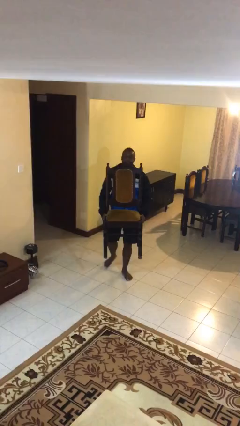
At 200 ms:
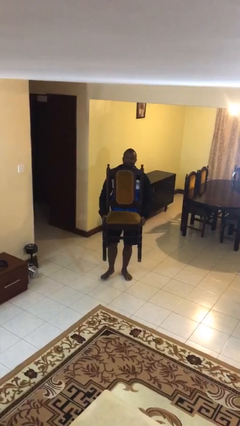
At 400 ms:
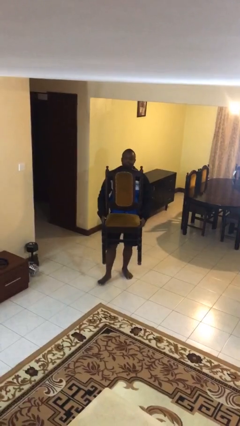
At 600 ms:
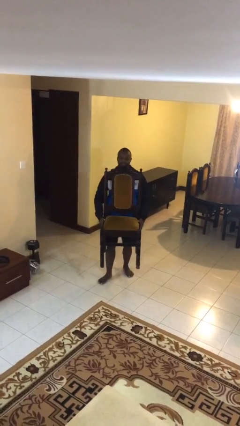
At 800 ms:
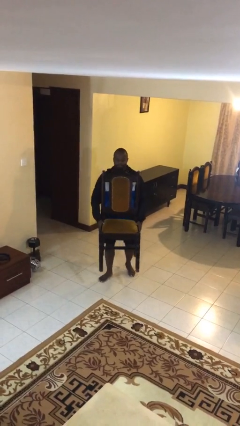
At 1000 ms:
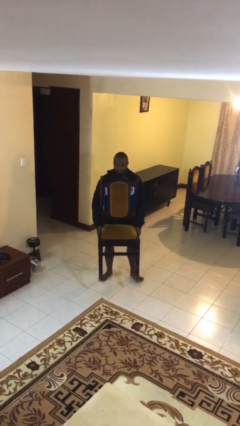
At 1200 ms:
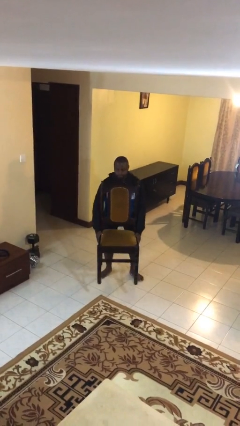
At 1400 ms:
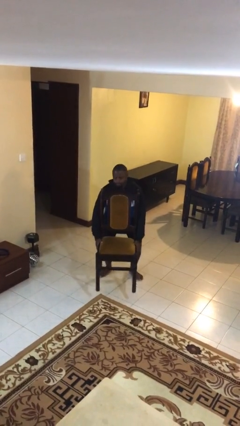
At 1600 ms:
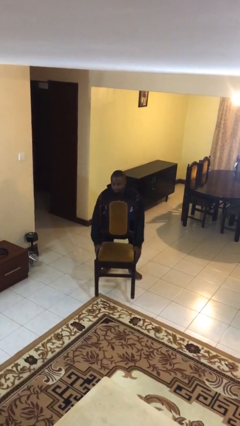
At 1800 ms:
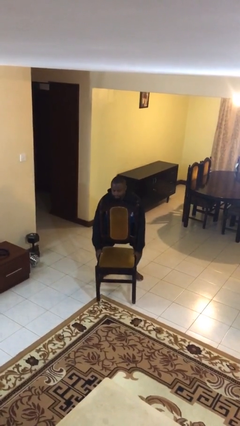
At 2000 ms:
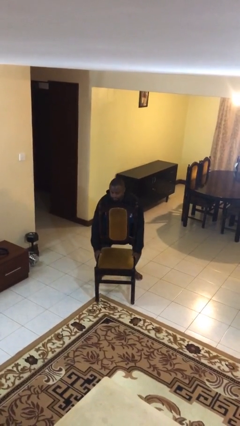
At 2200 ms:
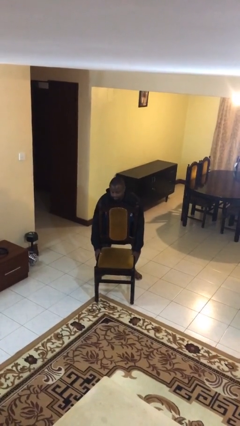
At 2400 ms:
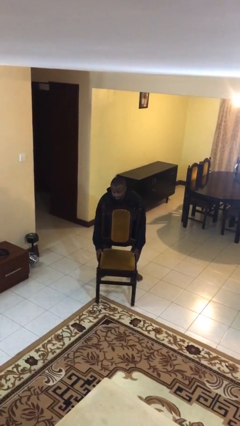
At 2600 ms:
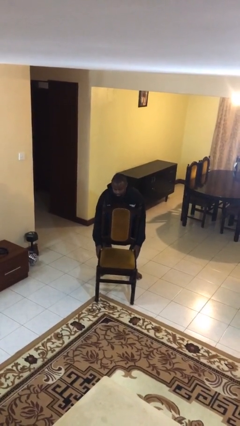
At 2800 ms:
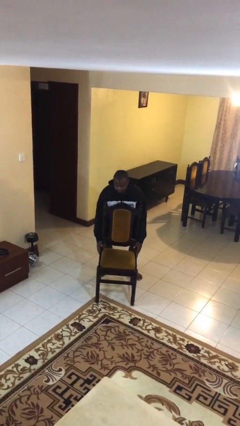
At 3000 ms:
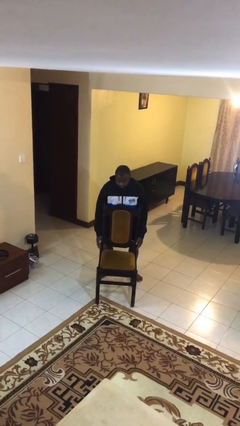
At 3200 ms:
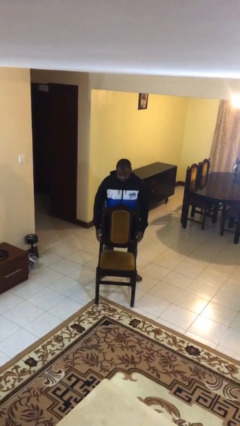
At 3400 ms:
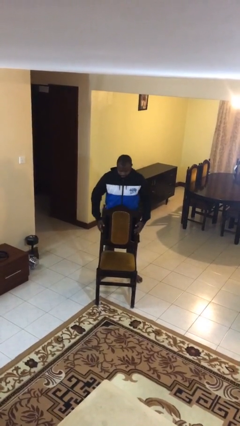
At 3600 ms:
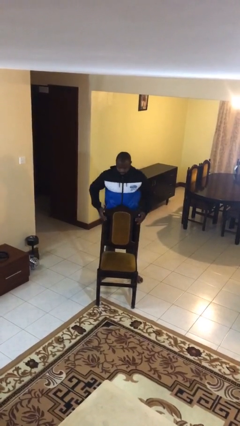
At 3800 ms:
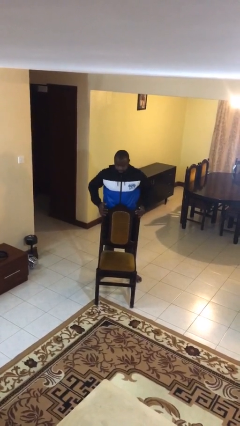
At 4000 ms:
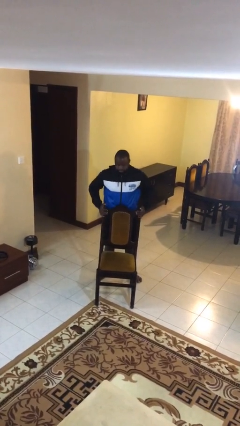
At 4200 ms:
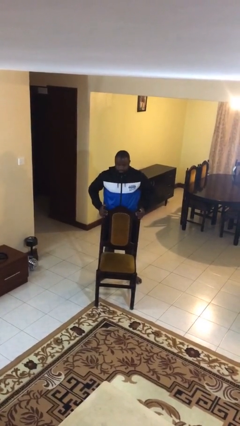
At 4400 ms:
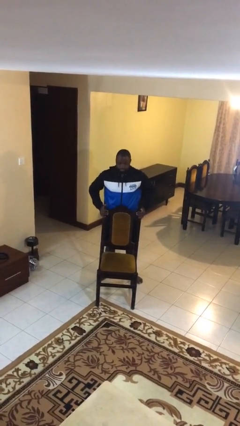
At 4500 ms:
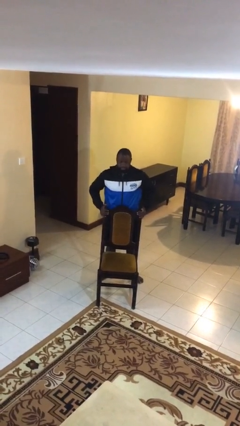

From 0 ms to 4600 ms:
person puts down object on floor

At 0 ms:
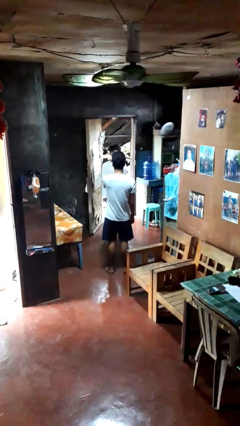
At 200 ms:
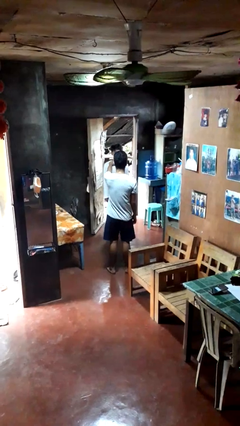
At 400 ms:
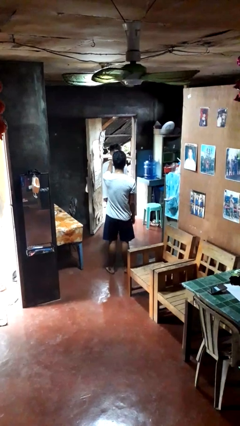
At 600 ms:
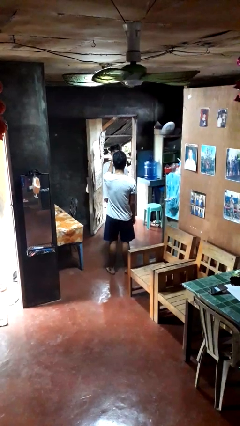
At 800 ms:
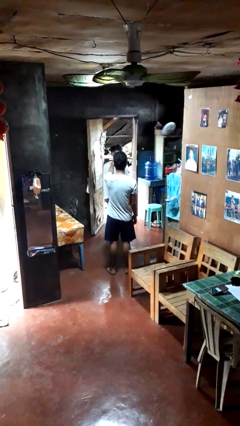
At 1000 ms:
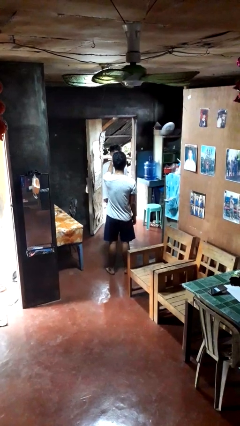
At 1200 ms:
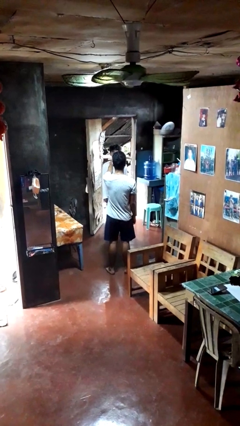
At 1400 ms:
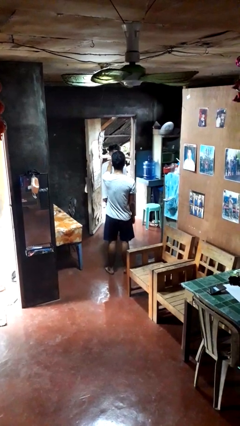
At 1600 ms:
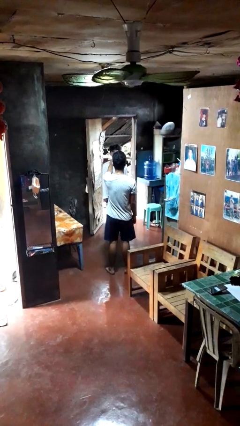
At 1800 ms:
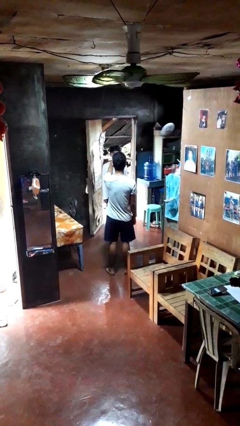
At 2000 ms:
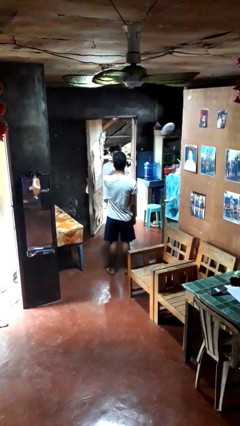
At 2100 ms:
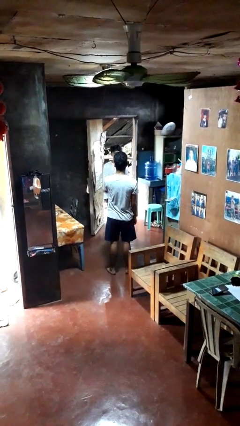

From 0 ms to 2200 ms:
person points at person

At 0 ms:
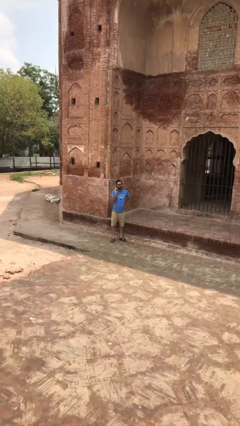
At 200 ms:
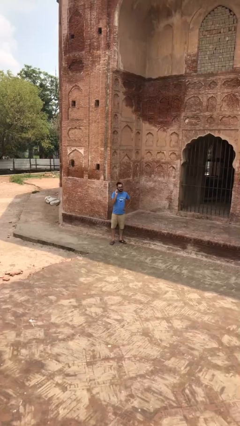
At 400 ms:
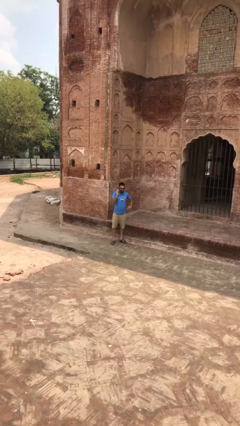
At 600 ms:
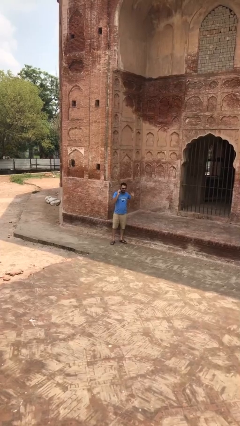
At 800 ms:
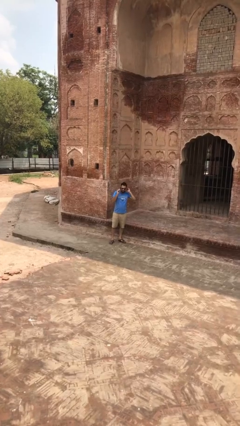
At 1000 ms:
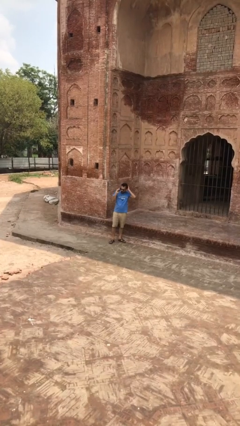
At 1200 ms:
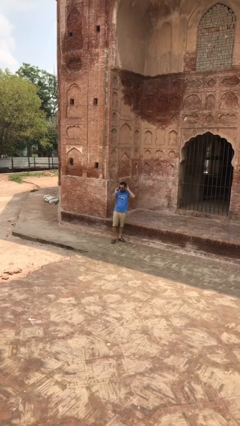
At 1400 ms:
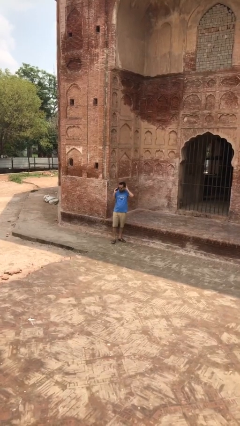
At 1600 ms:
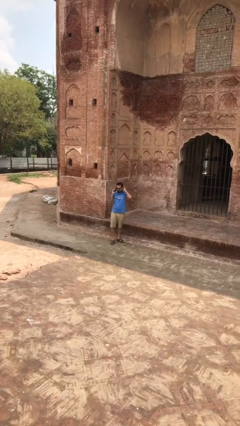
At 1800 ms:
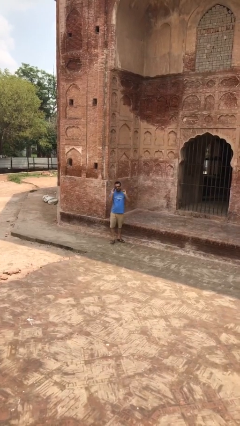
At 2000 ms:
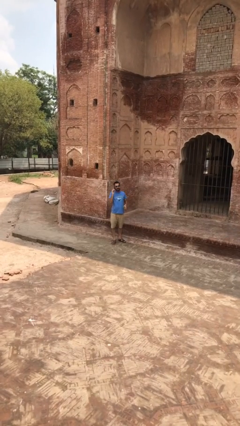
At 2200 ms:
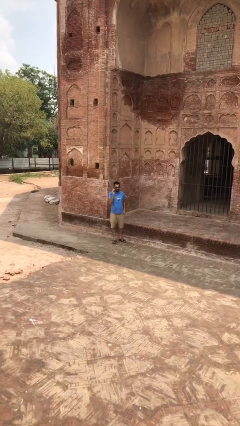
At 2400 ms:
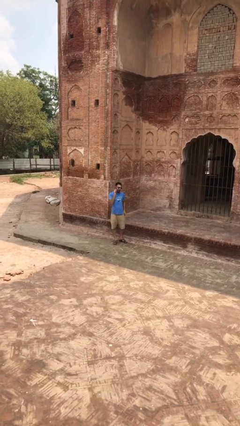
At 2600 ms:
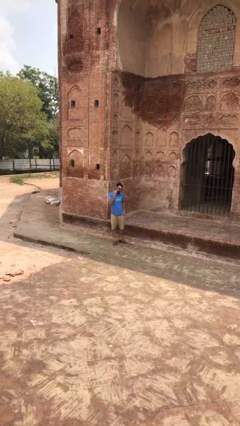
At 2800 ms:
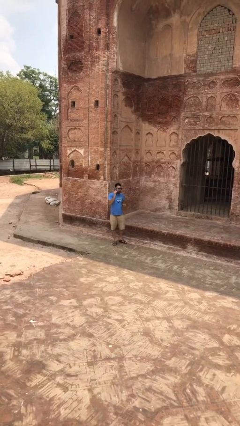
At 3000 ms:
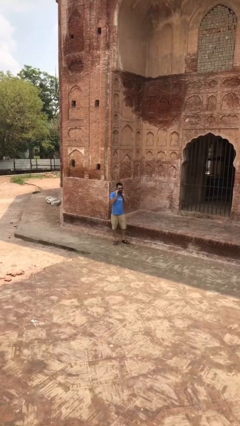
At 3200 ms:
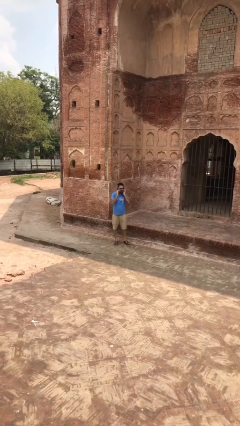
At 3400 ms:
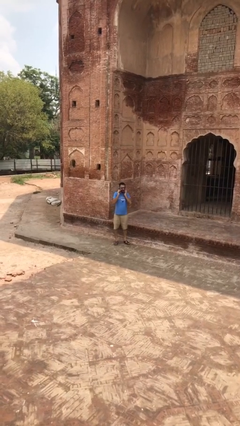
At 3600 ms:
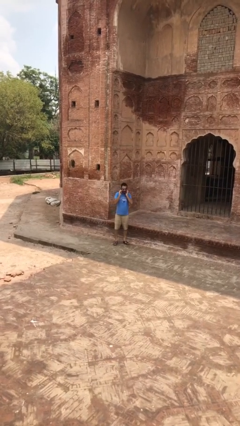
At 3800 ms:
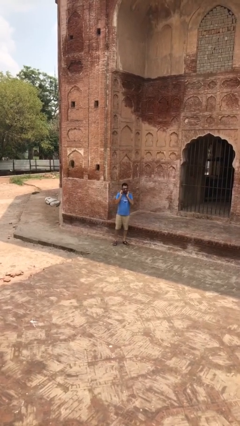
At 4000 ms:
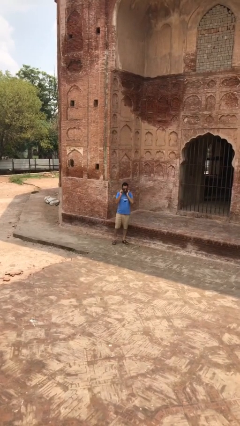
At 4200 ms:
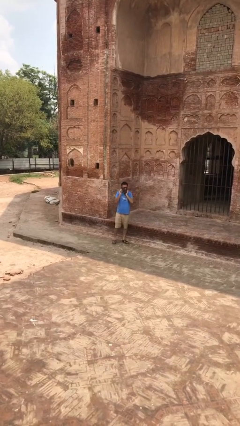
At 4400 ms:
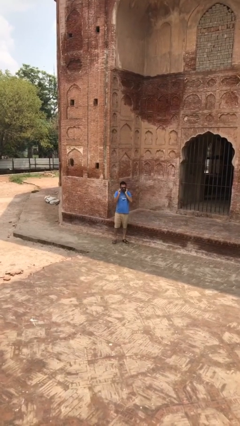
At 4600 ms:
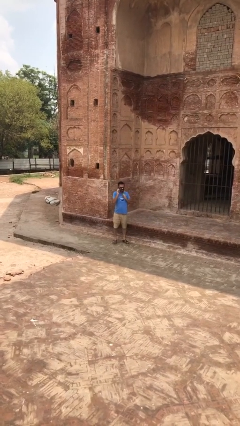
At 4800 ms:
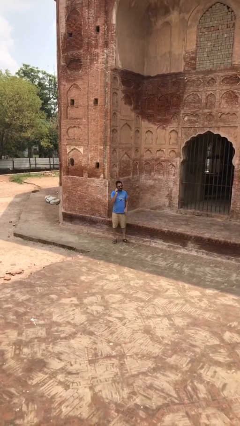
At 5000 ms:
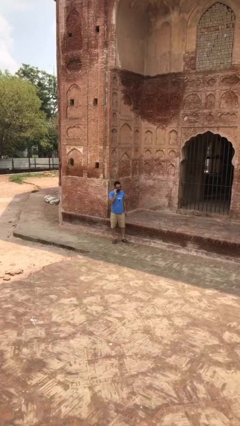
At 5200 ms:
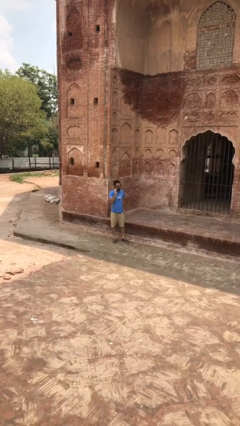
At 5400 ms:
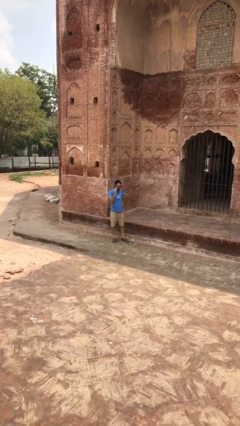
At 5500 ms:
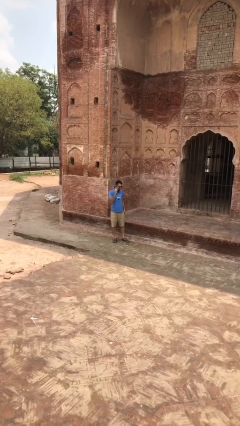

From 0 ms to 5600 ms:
person talks on phone

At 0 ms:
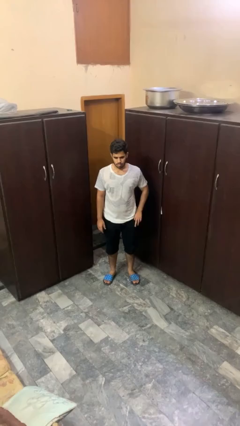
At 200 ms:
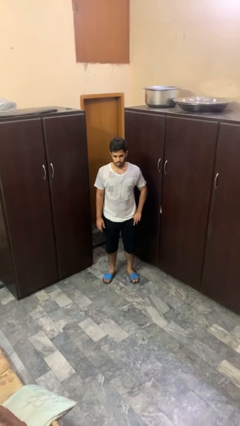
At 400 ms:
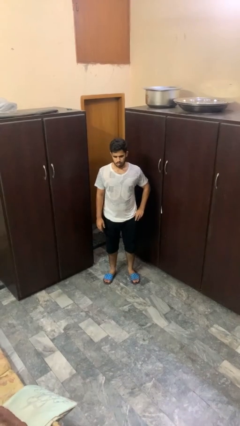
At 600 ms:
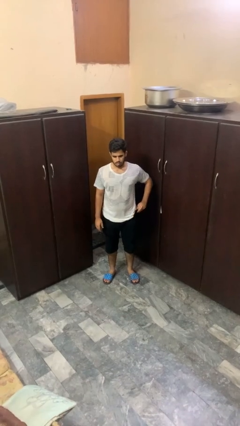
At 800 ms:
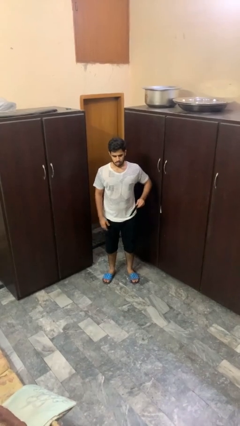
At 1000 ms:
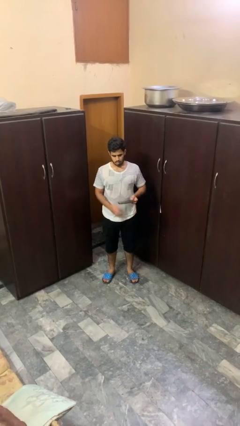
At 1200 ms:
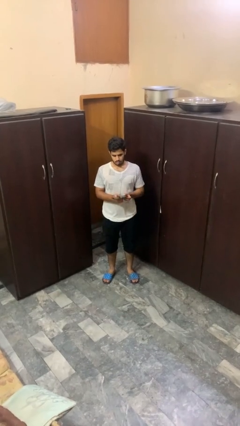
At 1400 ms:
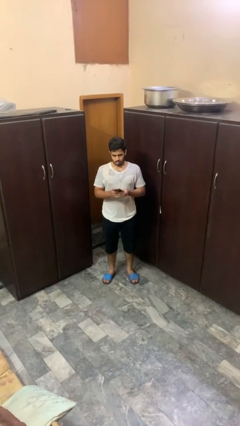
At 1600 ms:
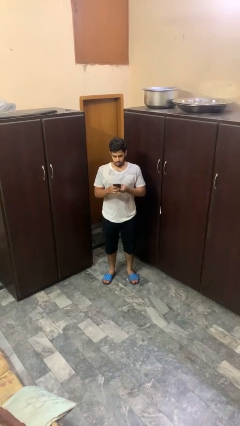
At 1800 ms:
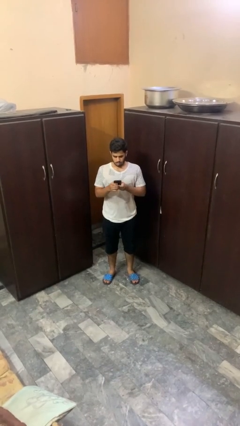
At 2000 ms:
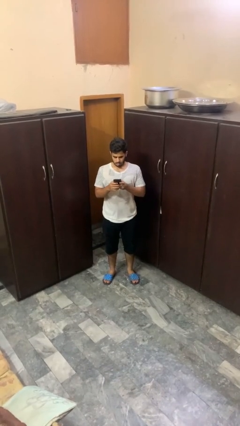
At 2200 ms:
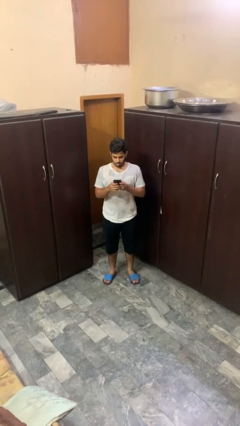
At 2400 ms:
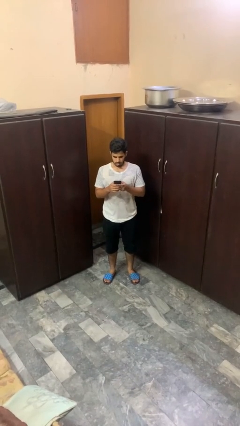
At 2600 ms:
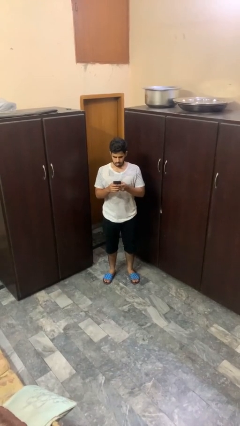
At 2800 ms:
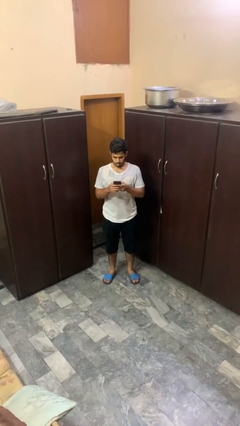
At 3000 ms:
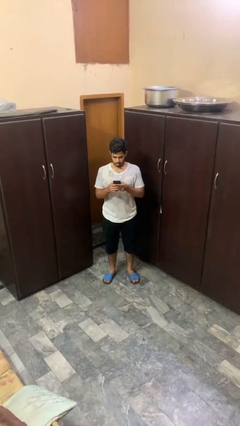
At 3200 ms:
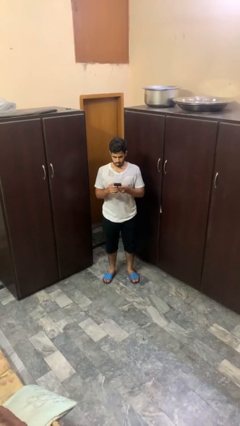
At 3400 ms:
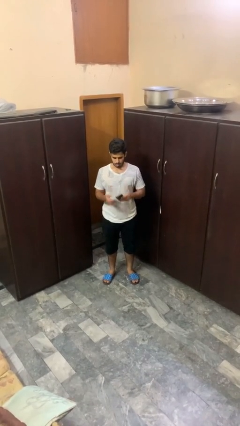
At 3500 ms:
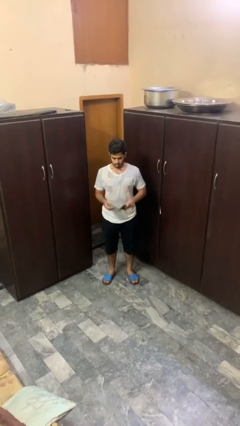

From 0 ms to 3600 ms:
person takes phone from pocket

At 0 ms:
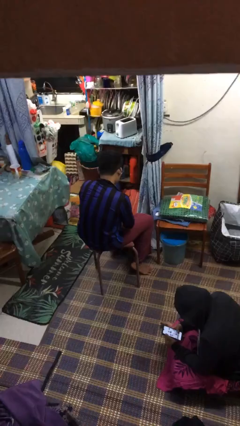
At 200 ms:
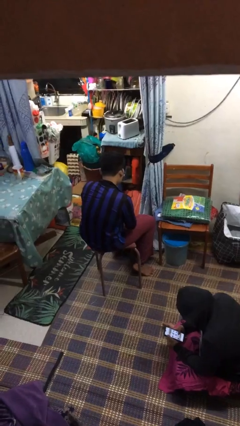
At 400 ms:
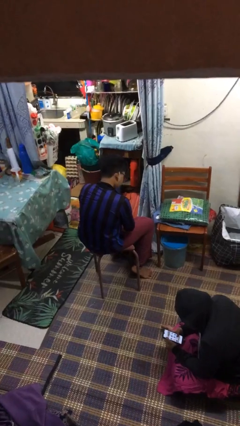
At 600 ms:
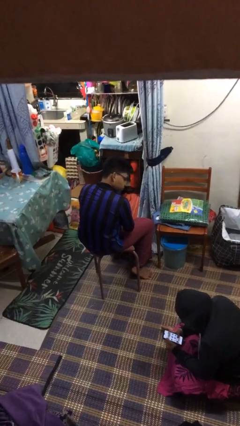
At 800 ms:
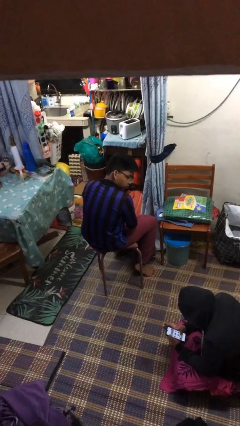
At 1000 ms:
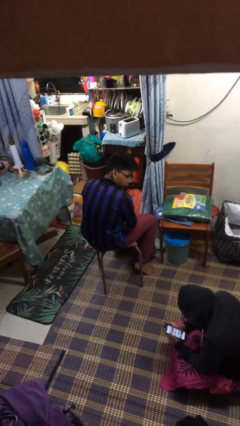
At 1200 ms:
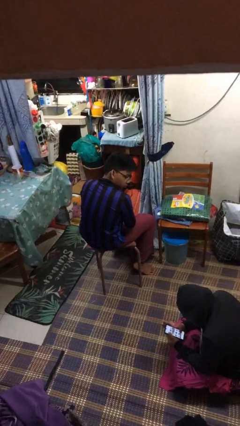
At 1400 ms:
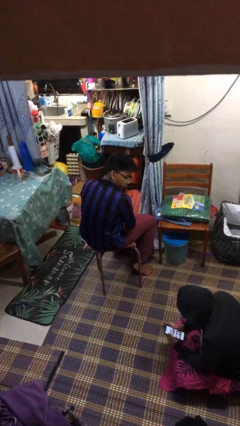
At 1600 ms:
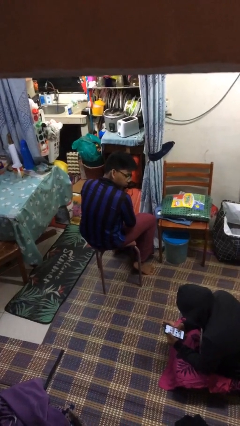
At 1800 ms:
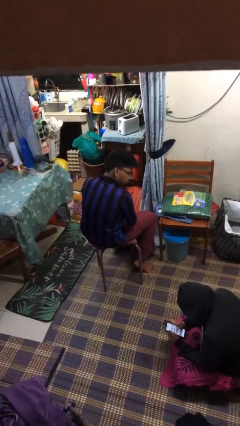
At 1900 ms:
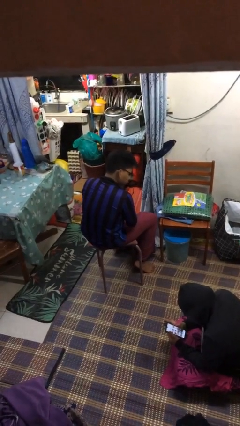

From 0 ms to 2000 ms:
person looks over shoulder
